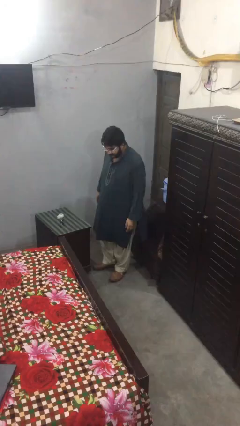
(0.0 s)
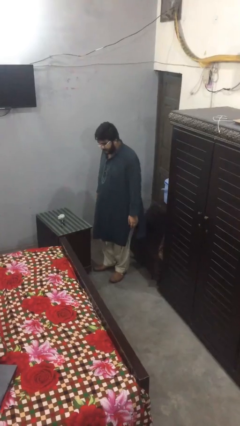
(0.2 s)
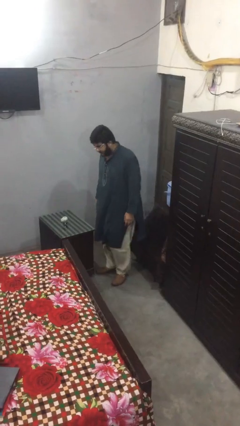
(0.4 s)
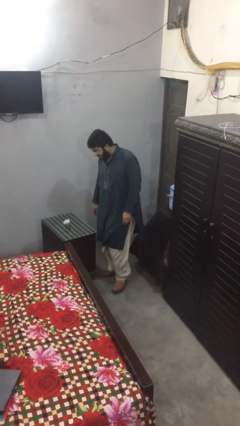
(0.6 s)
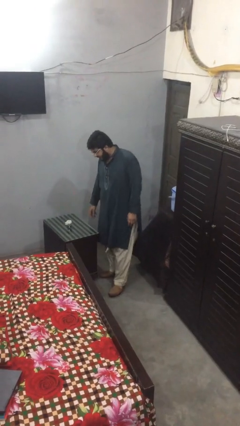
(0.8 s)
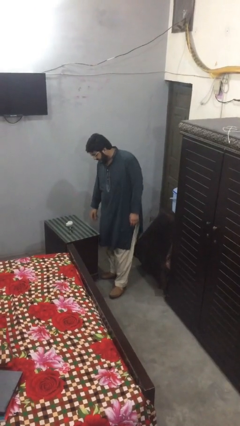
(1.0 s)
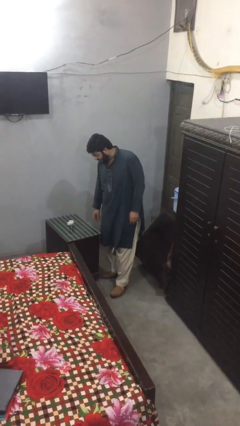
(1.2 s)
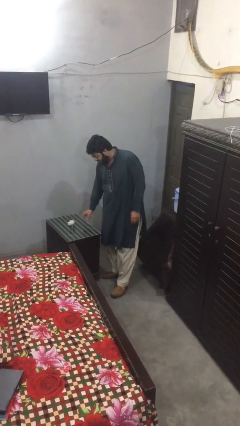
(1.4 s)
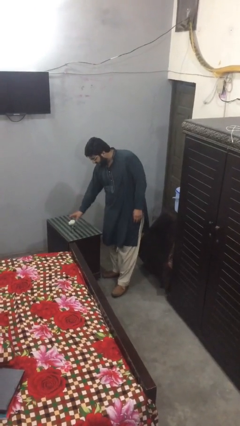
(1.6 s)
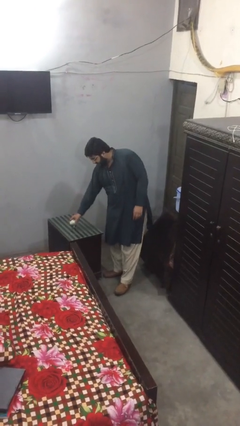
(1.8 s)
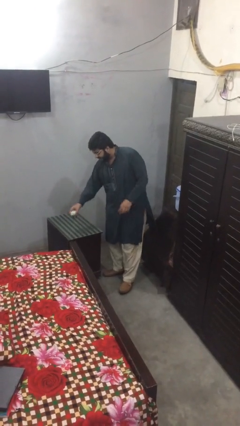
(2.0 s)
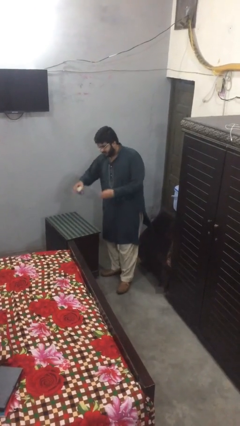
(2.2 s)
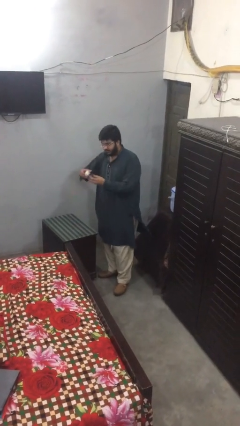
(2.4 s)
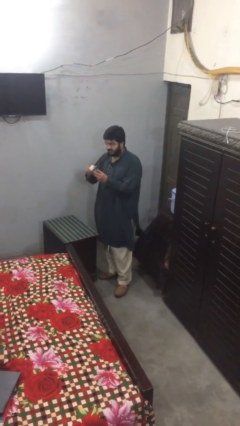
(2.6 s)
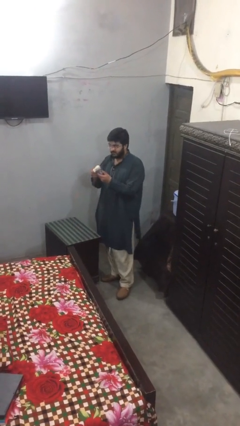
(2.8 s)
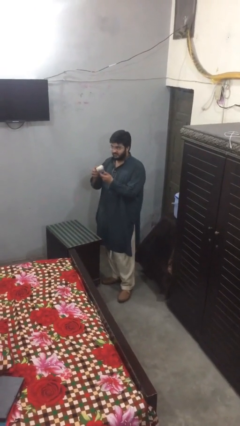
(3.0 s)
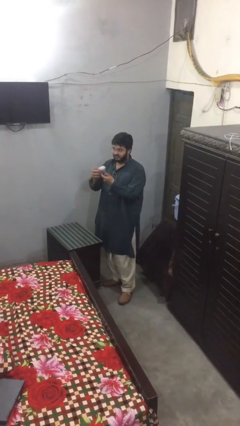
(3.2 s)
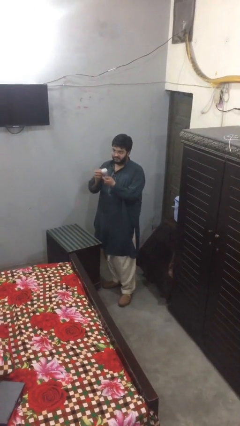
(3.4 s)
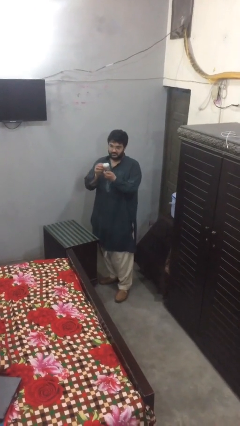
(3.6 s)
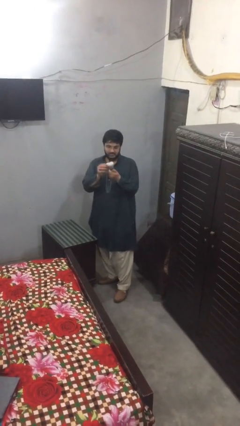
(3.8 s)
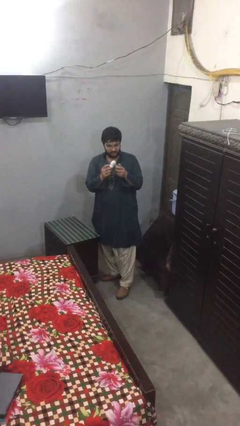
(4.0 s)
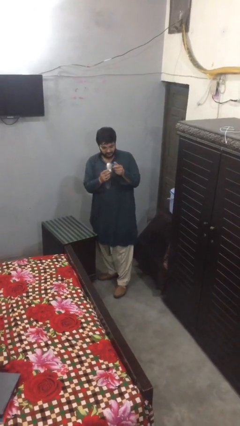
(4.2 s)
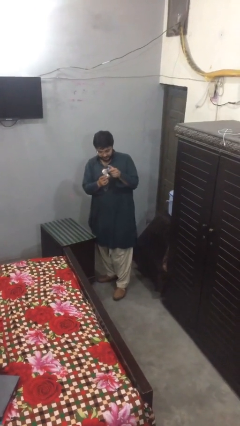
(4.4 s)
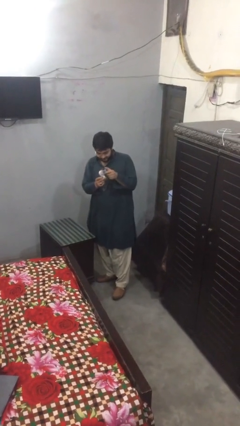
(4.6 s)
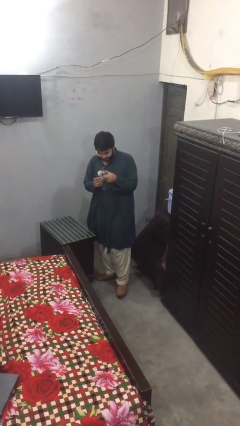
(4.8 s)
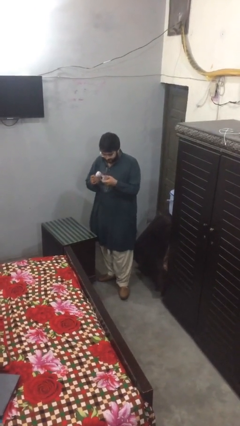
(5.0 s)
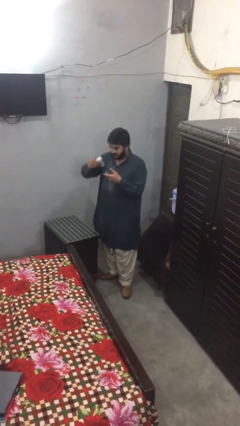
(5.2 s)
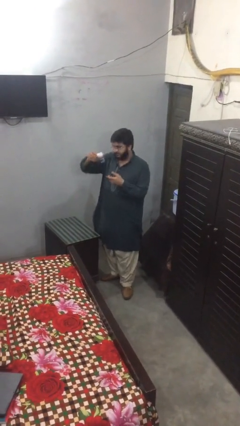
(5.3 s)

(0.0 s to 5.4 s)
person picks up object from table

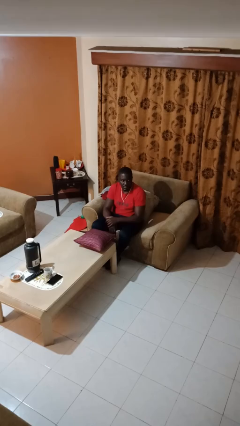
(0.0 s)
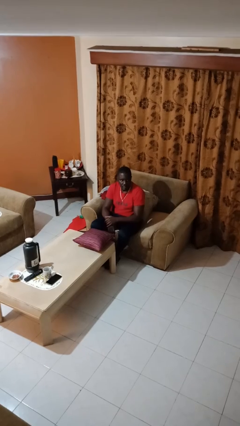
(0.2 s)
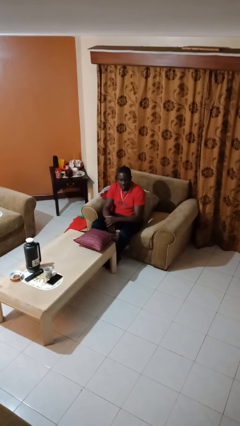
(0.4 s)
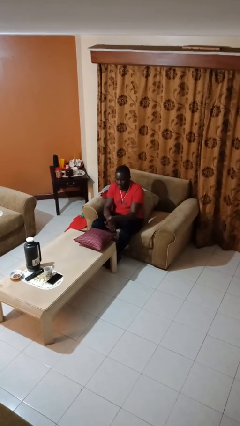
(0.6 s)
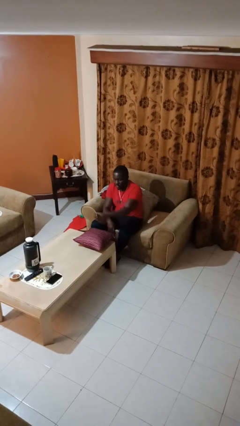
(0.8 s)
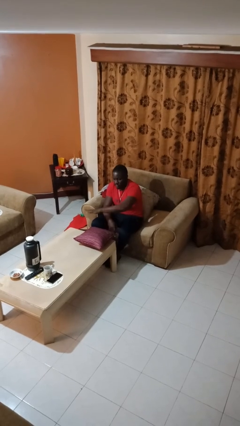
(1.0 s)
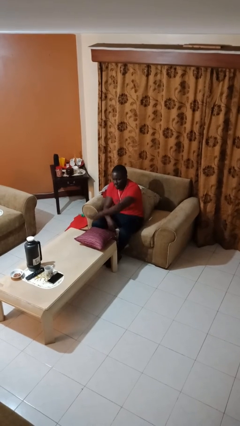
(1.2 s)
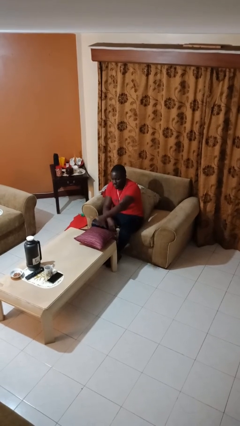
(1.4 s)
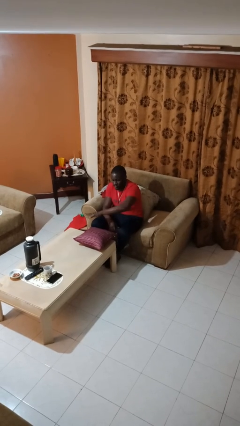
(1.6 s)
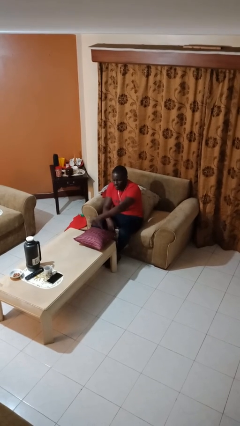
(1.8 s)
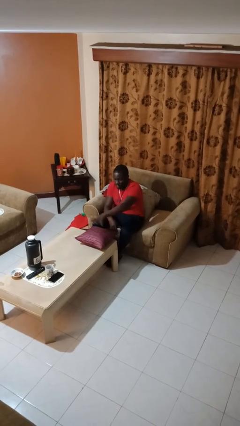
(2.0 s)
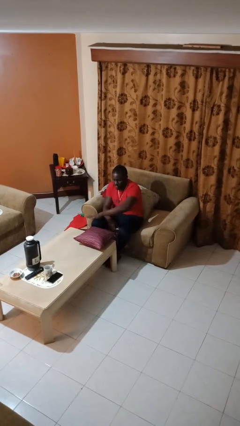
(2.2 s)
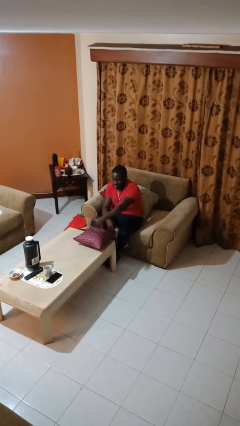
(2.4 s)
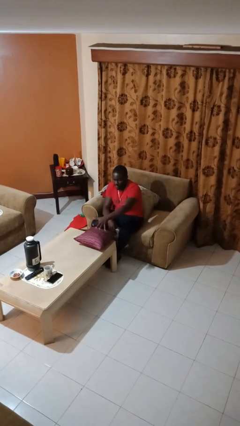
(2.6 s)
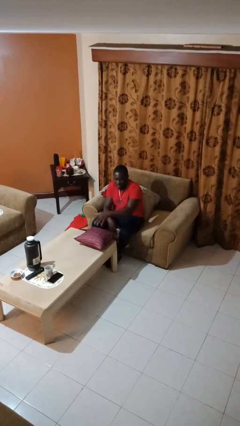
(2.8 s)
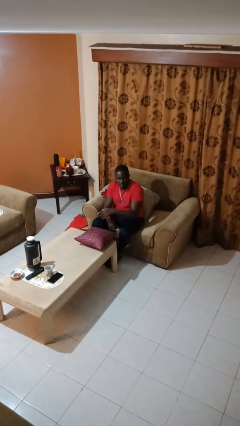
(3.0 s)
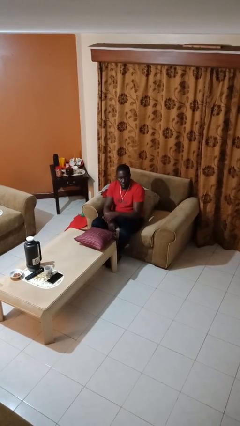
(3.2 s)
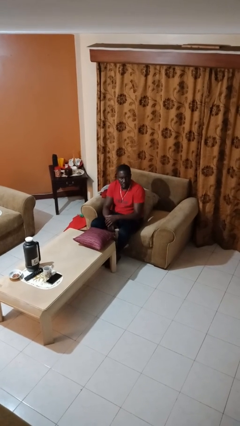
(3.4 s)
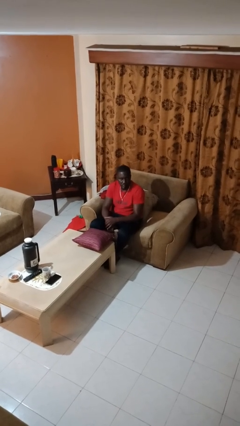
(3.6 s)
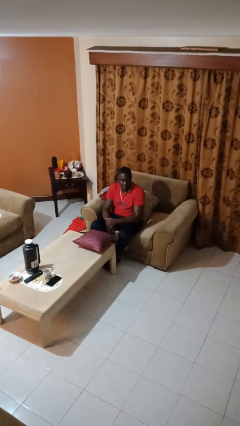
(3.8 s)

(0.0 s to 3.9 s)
person waves hand over object

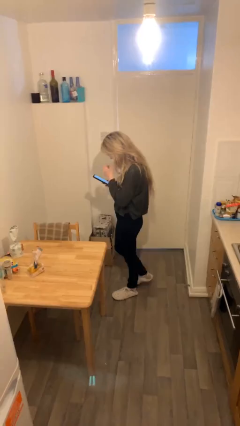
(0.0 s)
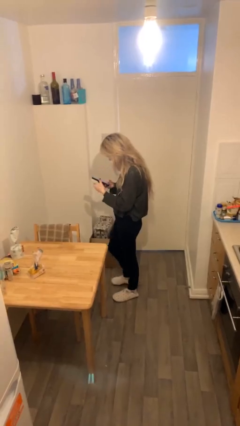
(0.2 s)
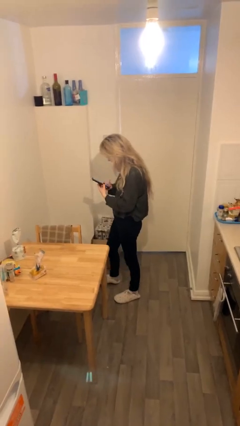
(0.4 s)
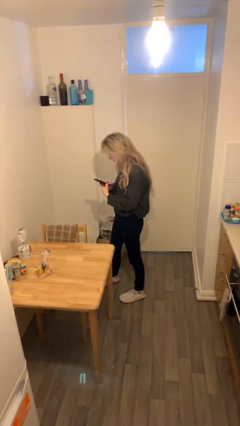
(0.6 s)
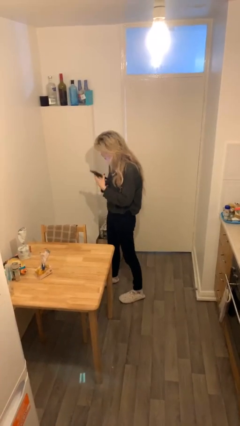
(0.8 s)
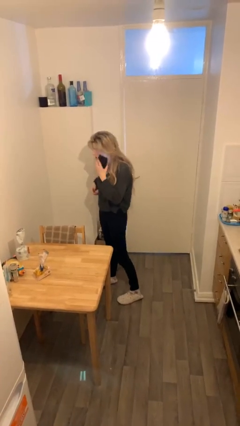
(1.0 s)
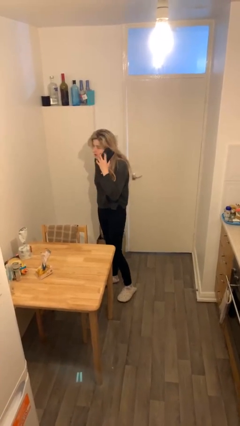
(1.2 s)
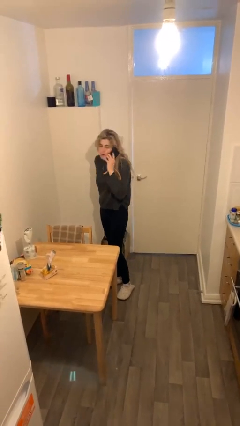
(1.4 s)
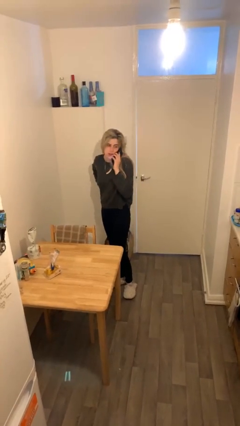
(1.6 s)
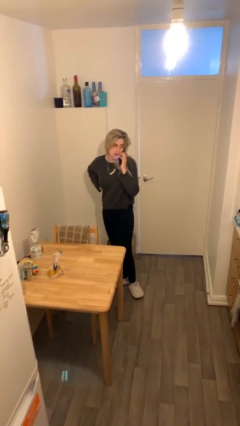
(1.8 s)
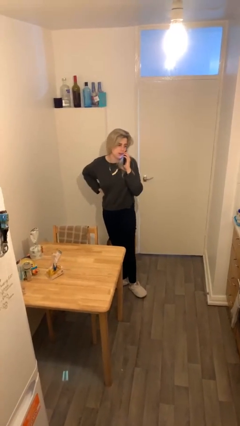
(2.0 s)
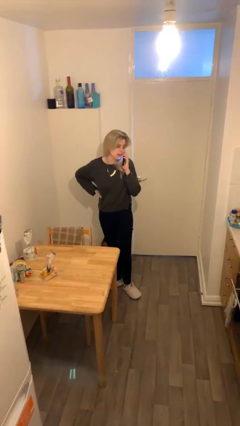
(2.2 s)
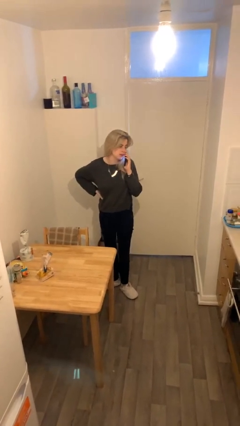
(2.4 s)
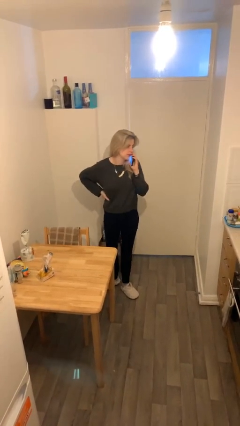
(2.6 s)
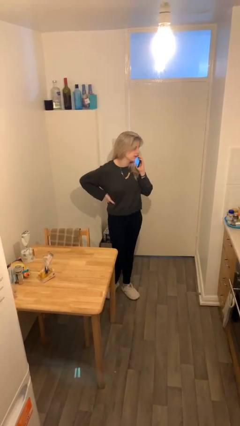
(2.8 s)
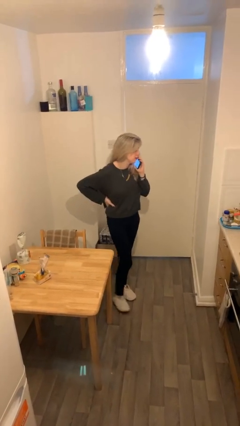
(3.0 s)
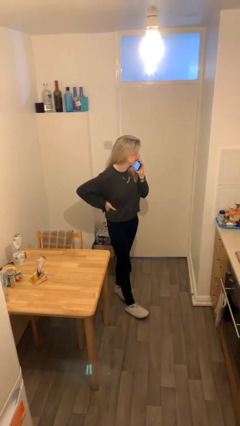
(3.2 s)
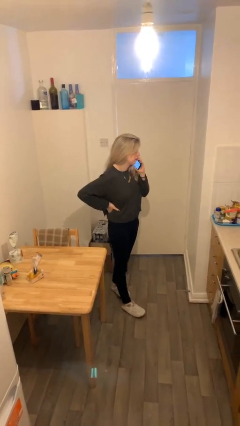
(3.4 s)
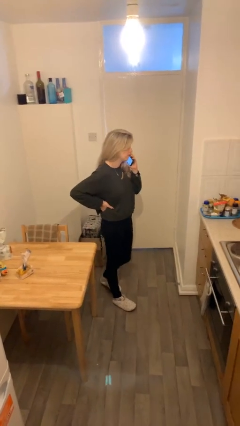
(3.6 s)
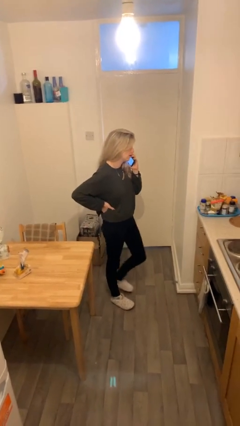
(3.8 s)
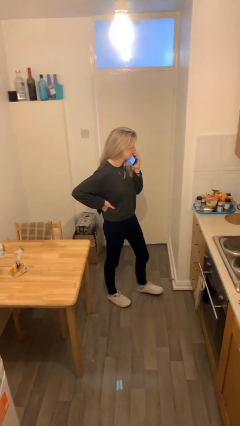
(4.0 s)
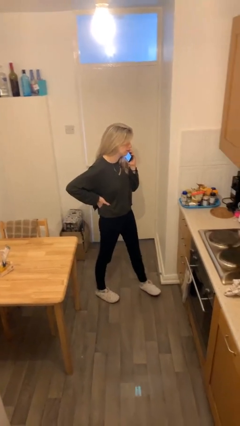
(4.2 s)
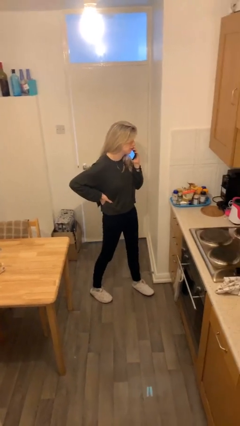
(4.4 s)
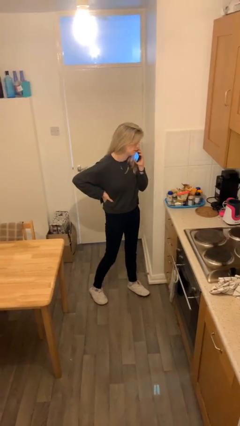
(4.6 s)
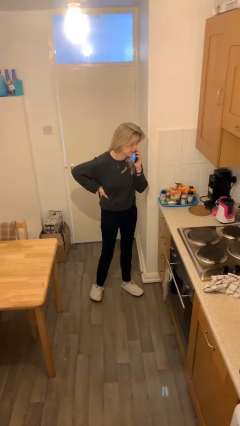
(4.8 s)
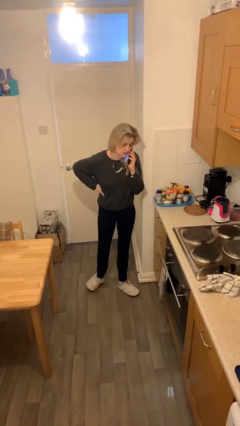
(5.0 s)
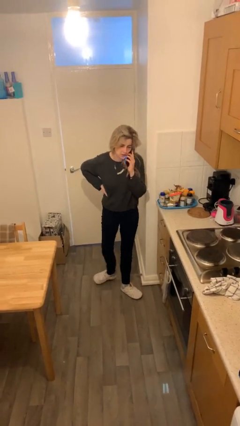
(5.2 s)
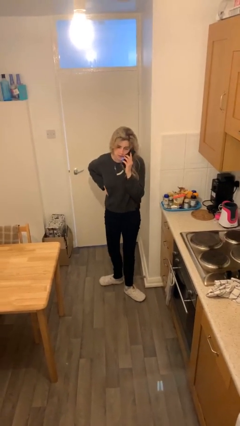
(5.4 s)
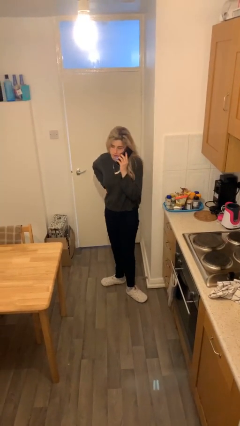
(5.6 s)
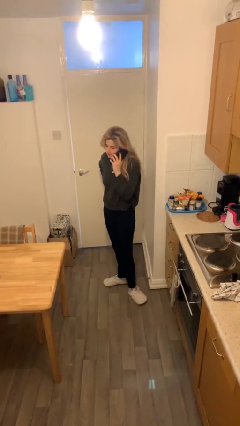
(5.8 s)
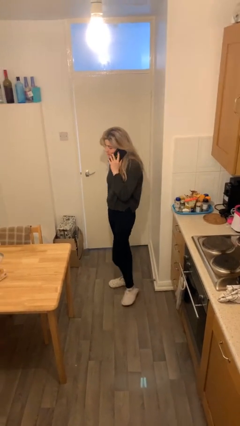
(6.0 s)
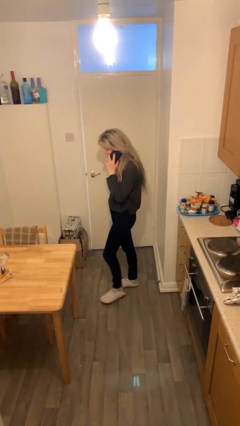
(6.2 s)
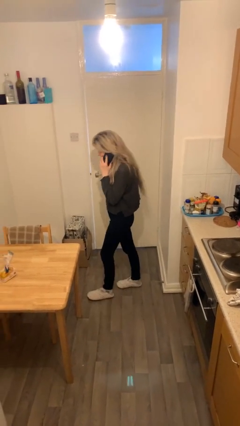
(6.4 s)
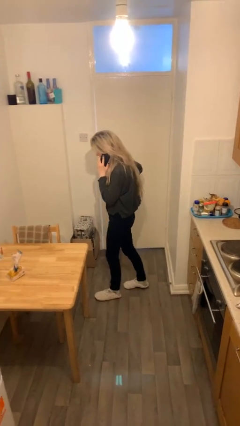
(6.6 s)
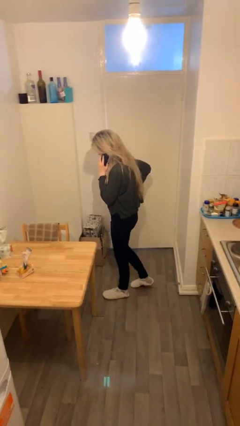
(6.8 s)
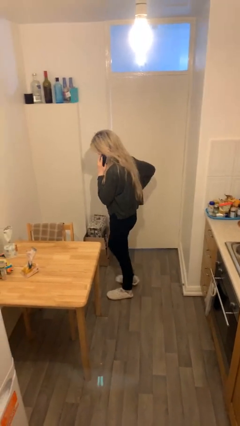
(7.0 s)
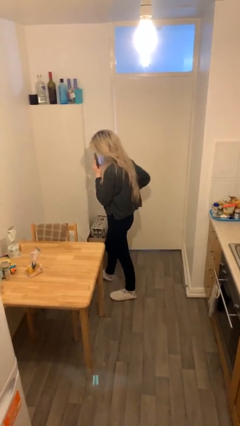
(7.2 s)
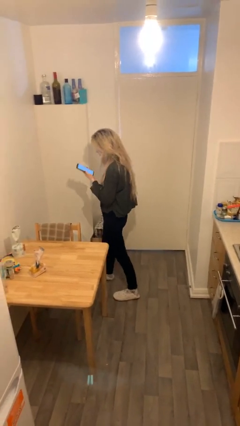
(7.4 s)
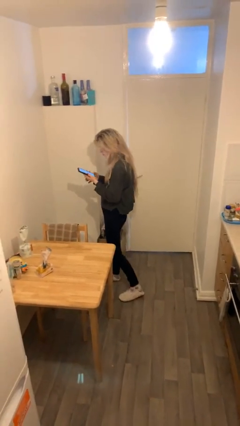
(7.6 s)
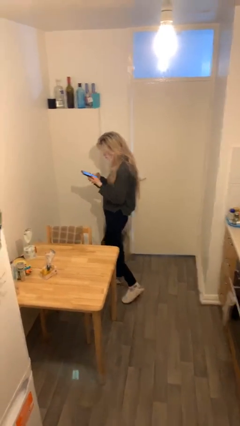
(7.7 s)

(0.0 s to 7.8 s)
person talks on phone

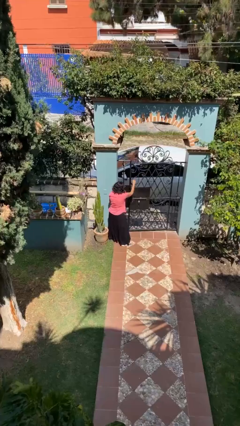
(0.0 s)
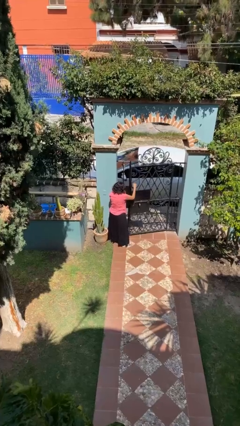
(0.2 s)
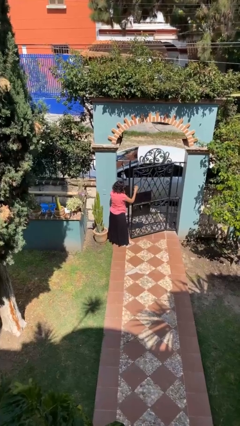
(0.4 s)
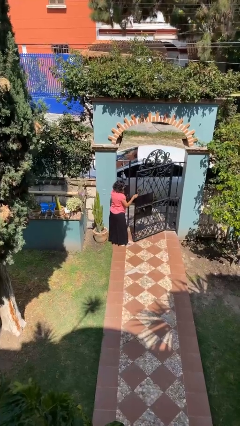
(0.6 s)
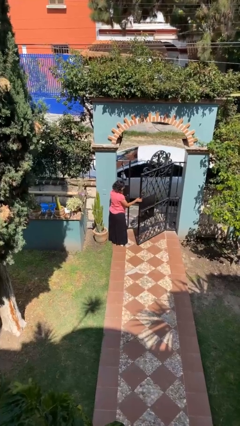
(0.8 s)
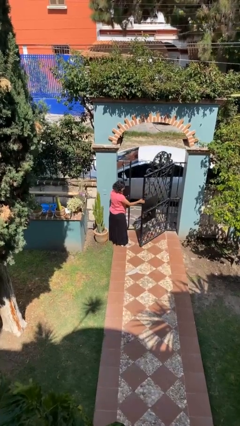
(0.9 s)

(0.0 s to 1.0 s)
person opens facility door
